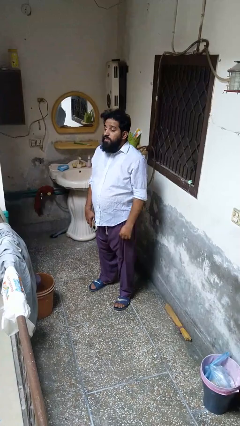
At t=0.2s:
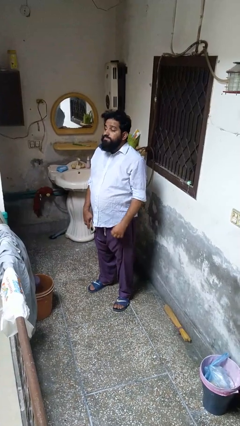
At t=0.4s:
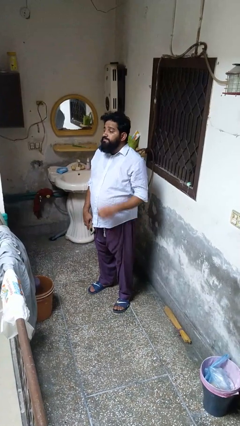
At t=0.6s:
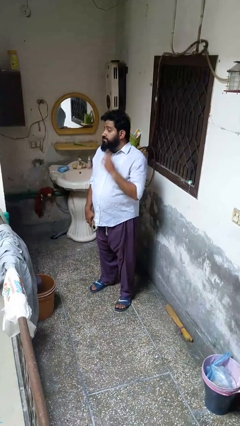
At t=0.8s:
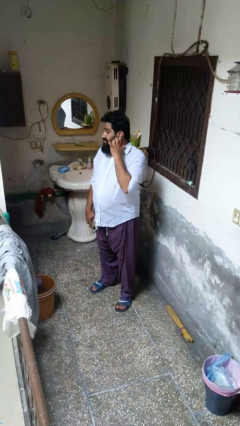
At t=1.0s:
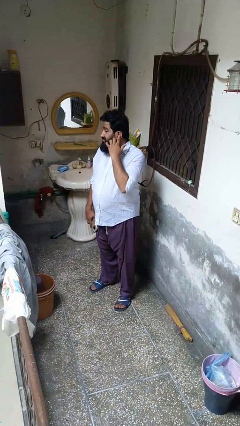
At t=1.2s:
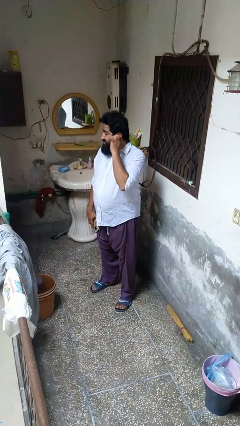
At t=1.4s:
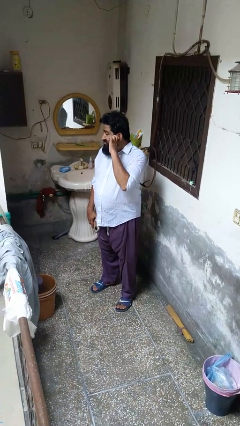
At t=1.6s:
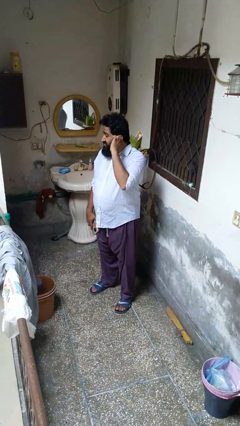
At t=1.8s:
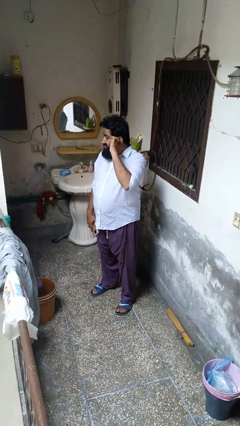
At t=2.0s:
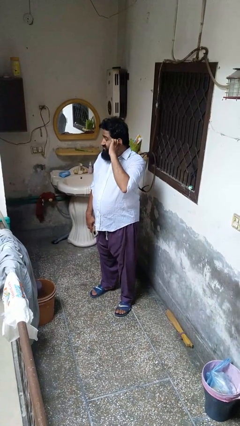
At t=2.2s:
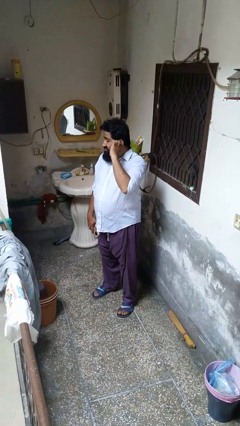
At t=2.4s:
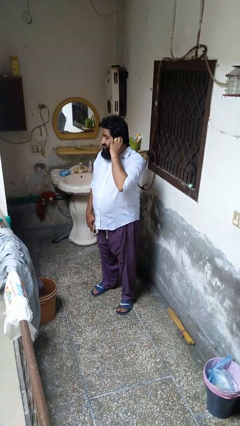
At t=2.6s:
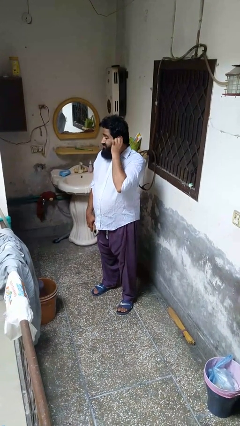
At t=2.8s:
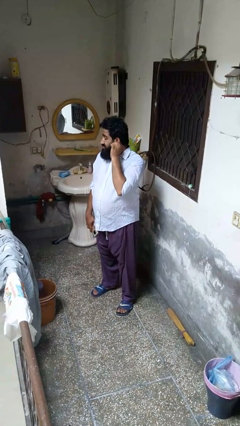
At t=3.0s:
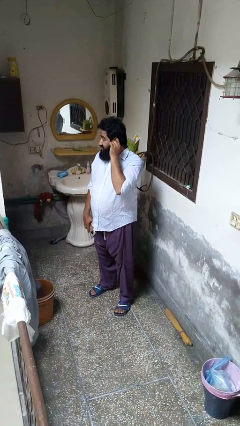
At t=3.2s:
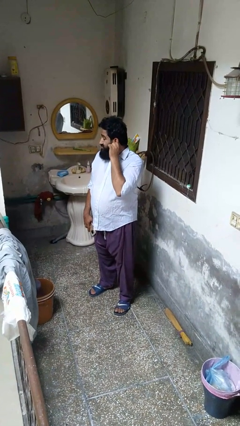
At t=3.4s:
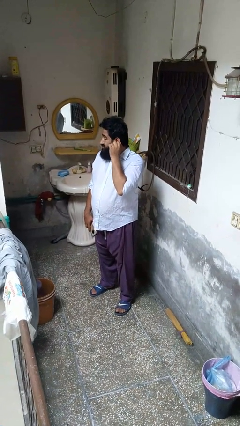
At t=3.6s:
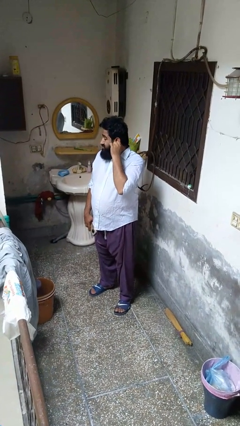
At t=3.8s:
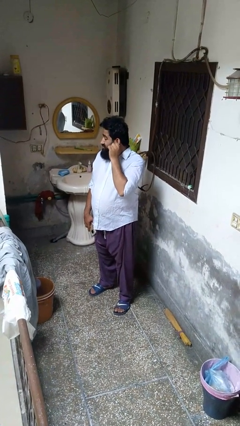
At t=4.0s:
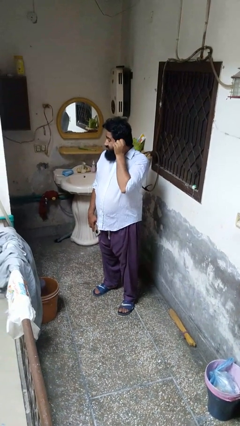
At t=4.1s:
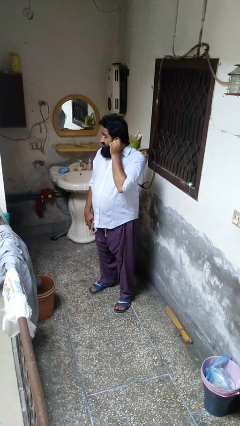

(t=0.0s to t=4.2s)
person touches earlobe

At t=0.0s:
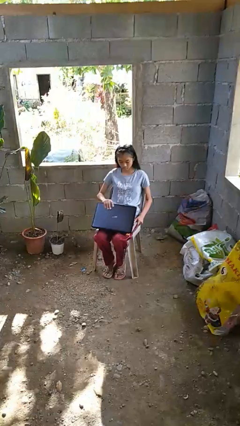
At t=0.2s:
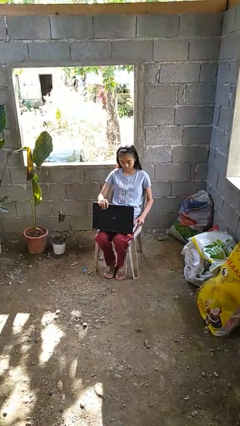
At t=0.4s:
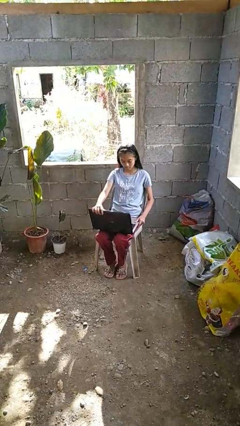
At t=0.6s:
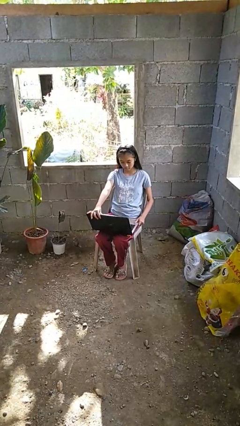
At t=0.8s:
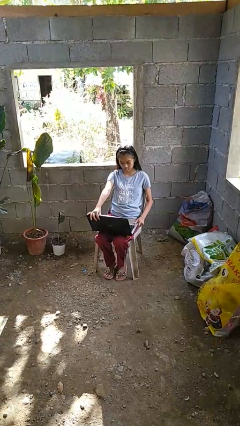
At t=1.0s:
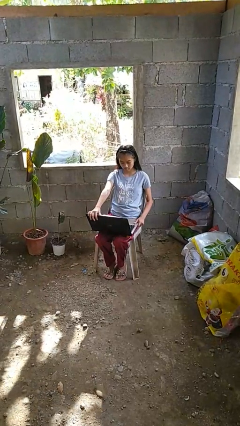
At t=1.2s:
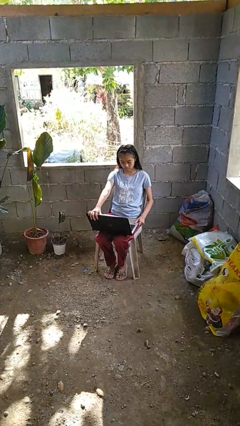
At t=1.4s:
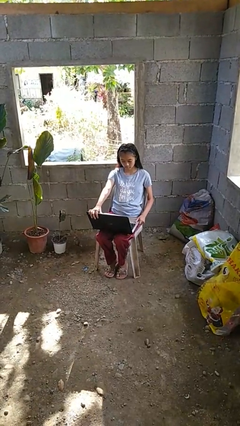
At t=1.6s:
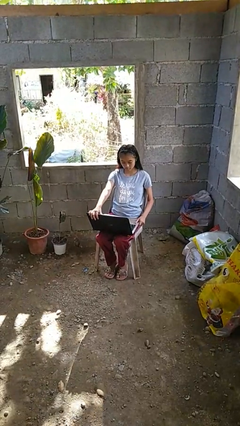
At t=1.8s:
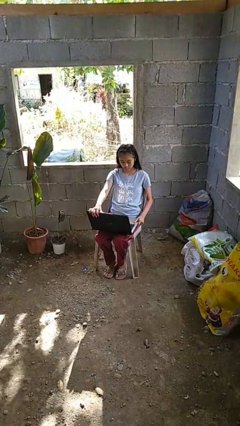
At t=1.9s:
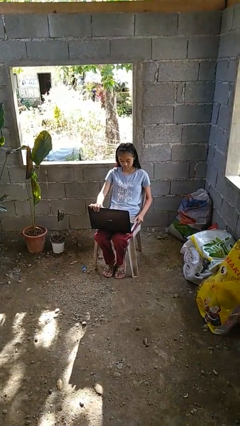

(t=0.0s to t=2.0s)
person opens laptop

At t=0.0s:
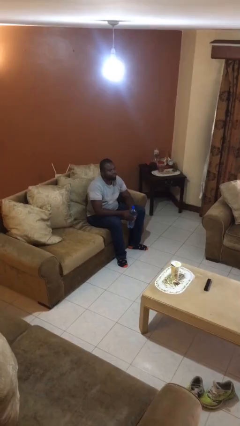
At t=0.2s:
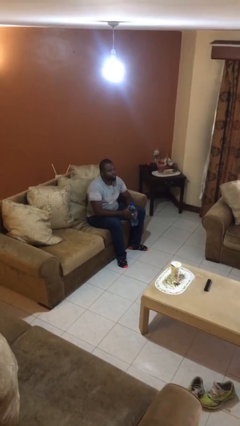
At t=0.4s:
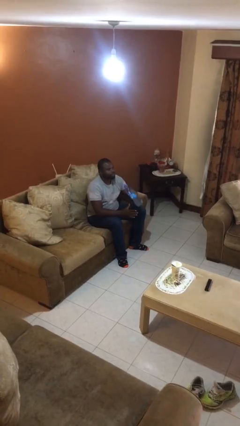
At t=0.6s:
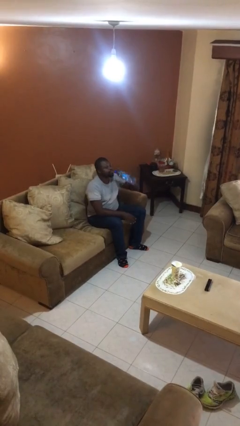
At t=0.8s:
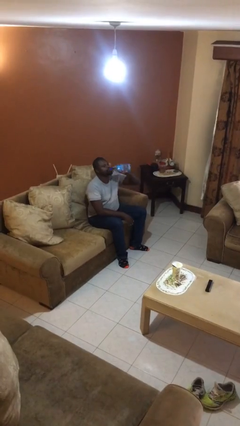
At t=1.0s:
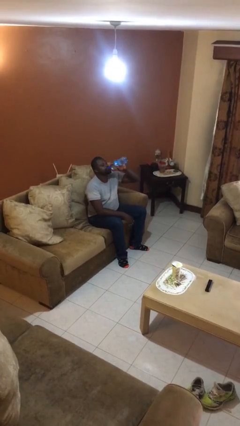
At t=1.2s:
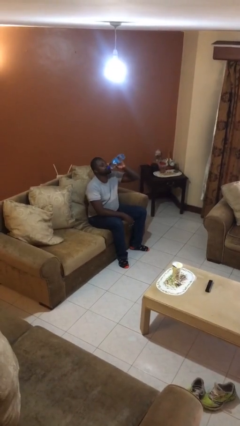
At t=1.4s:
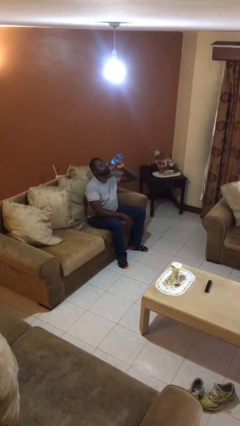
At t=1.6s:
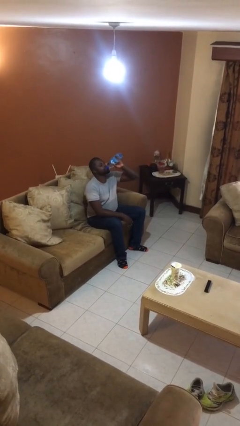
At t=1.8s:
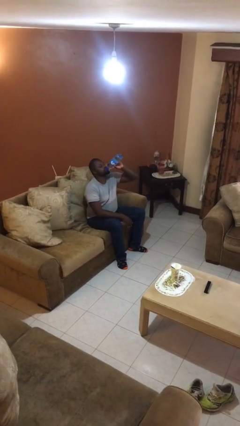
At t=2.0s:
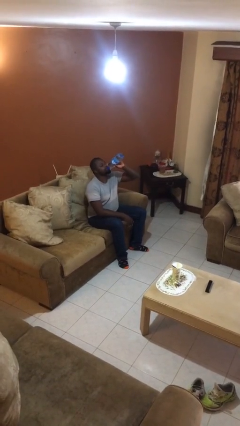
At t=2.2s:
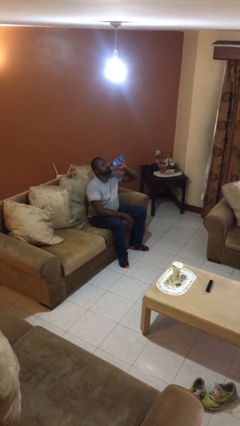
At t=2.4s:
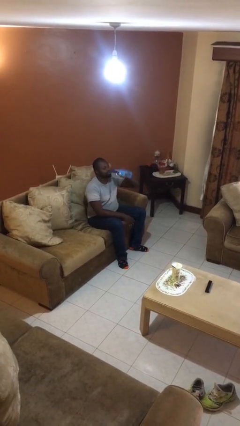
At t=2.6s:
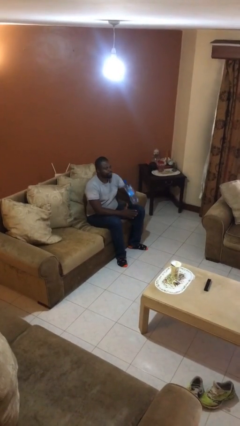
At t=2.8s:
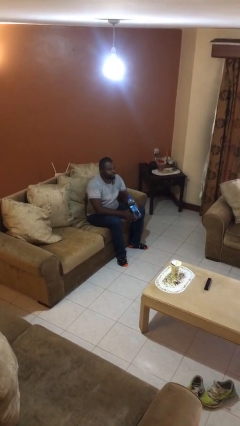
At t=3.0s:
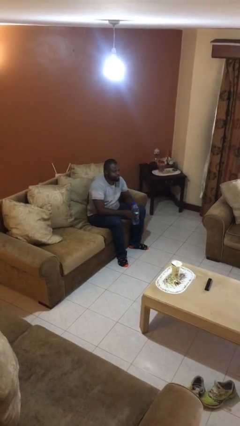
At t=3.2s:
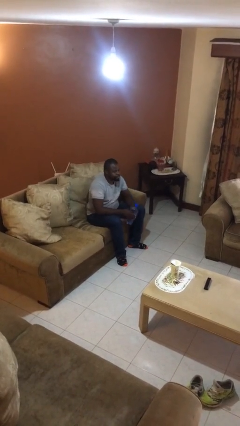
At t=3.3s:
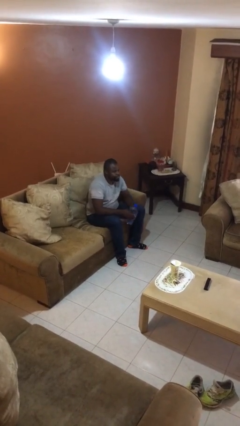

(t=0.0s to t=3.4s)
person drinks from bottle

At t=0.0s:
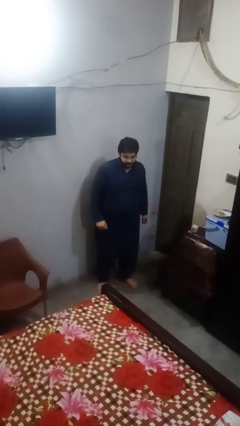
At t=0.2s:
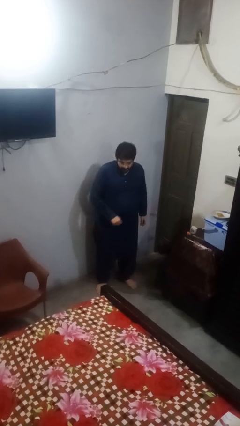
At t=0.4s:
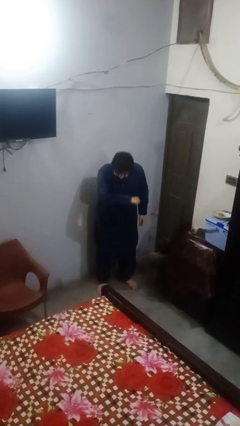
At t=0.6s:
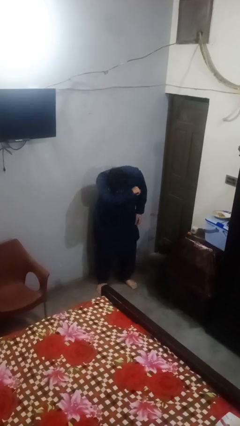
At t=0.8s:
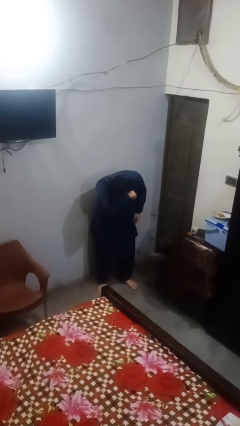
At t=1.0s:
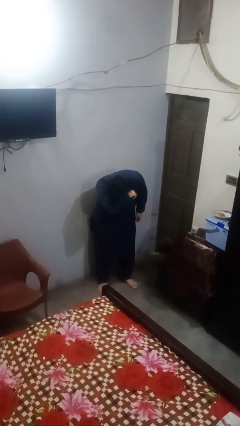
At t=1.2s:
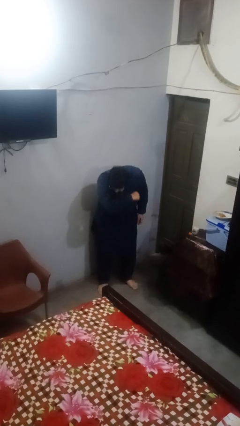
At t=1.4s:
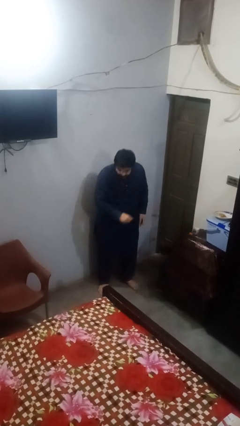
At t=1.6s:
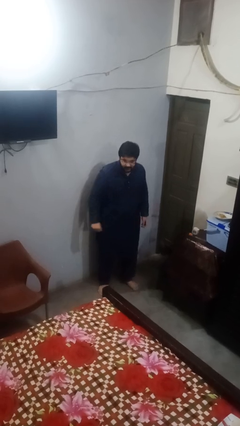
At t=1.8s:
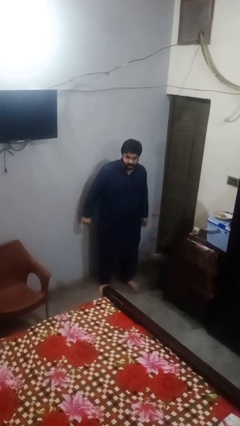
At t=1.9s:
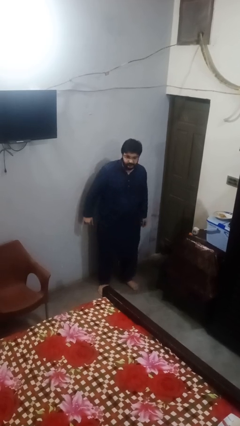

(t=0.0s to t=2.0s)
person sneezes into arm

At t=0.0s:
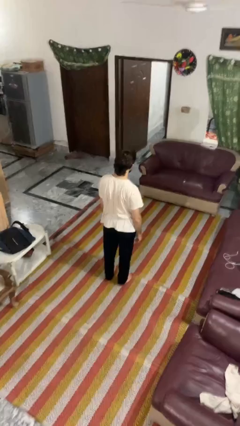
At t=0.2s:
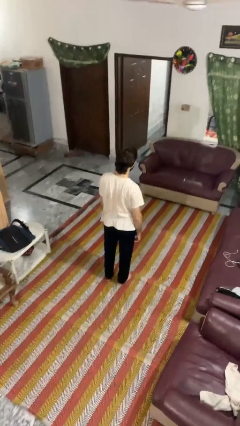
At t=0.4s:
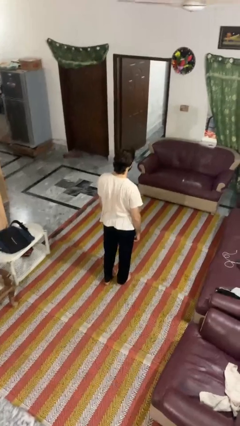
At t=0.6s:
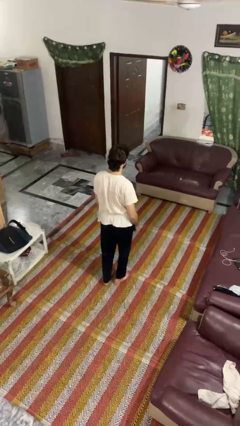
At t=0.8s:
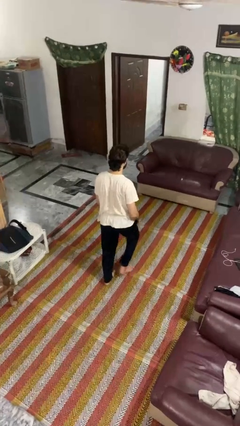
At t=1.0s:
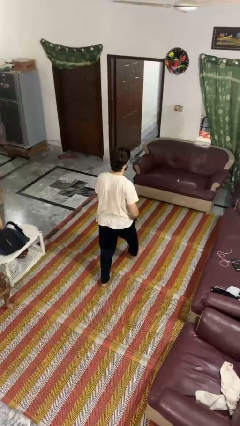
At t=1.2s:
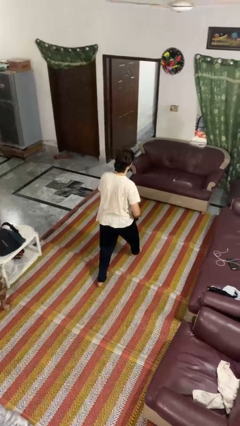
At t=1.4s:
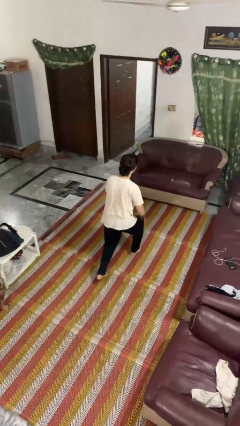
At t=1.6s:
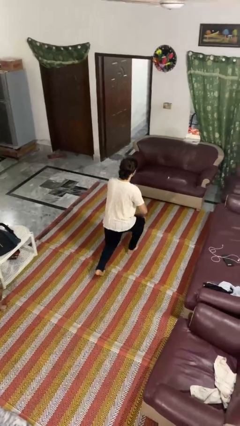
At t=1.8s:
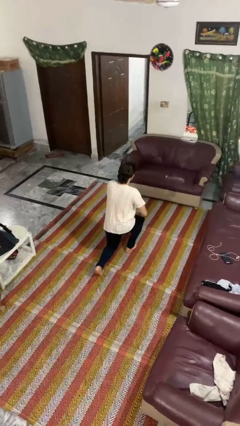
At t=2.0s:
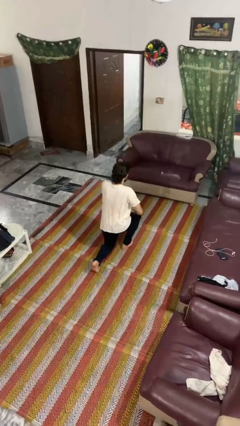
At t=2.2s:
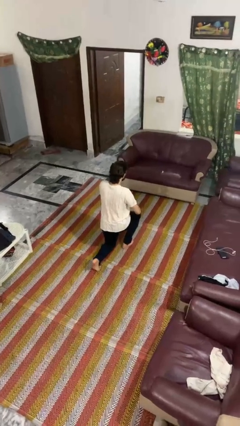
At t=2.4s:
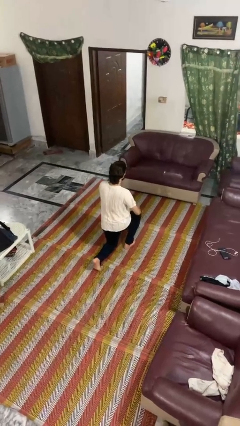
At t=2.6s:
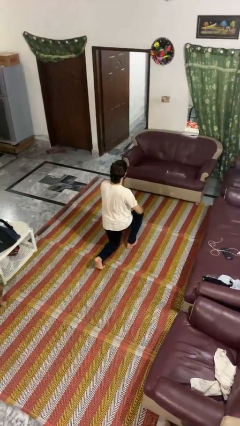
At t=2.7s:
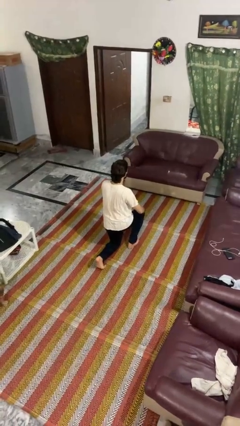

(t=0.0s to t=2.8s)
person kneels

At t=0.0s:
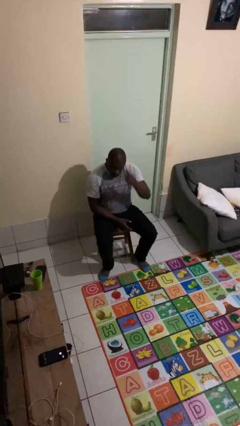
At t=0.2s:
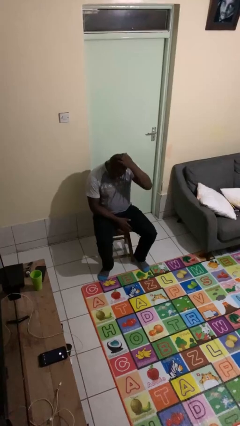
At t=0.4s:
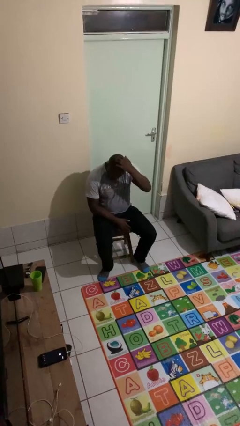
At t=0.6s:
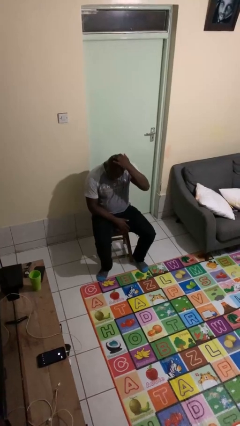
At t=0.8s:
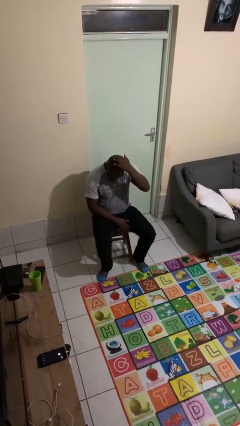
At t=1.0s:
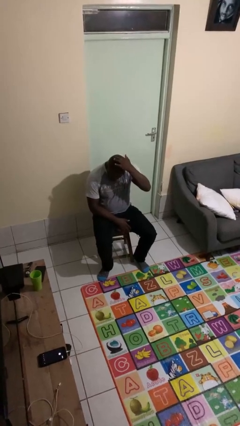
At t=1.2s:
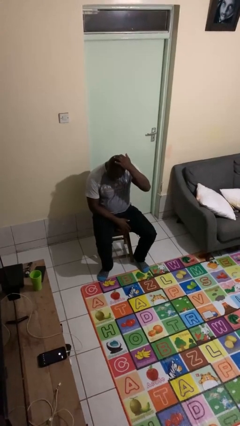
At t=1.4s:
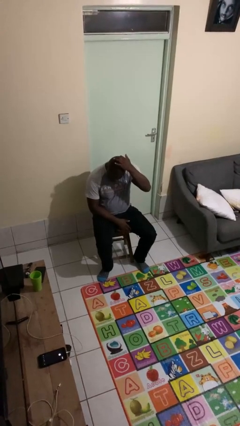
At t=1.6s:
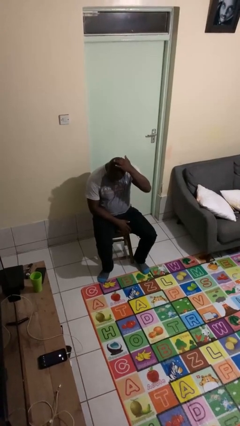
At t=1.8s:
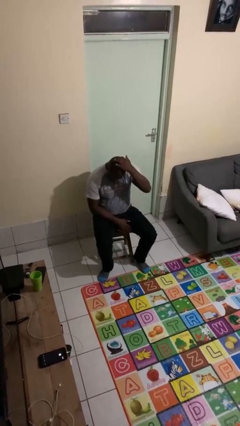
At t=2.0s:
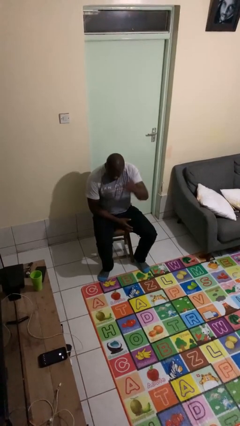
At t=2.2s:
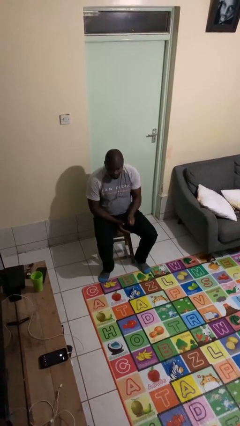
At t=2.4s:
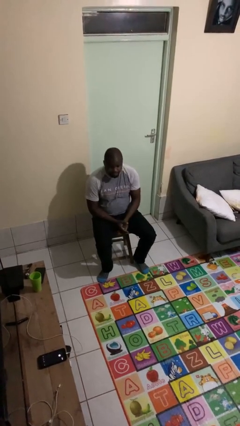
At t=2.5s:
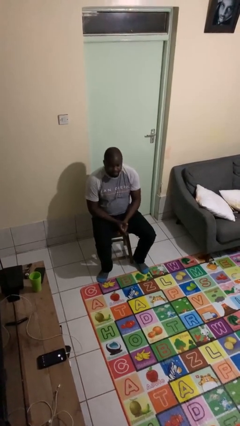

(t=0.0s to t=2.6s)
person scratches face
